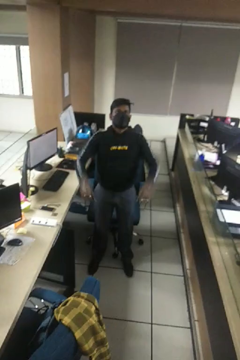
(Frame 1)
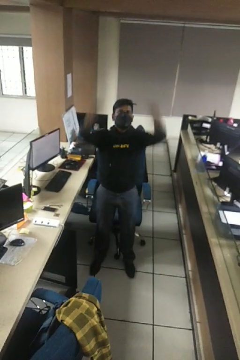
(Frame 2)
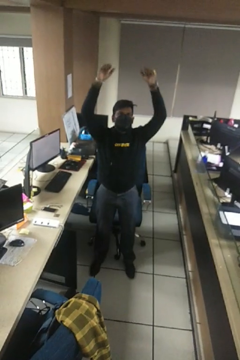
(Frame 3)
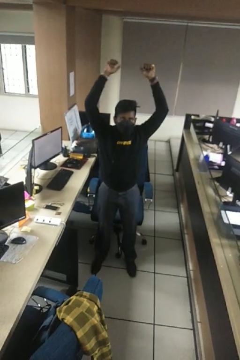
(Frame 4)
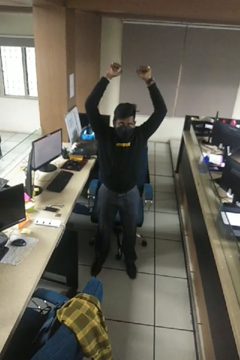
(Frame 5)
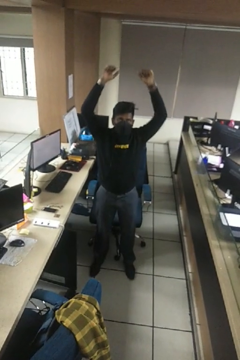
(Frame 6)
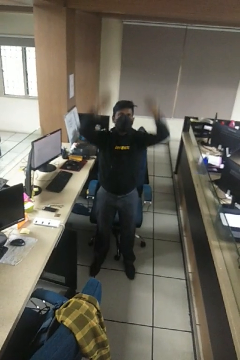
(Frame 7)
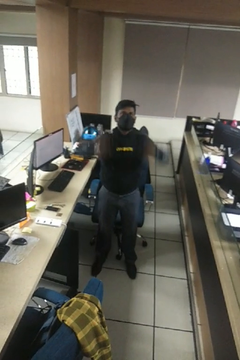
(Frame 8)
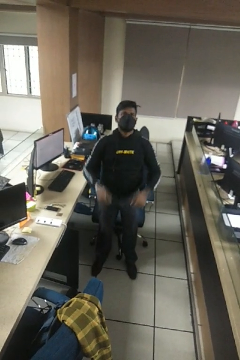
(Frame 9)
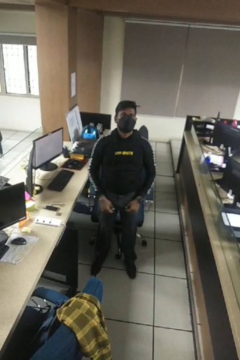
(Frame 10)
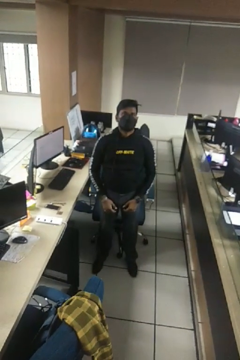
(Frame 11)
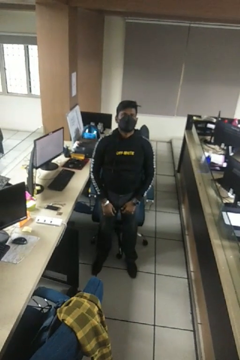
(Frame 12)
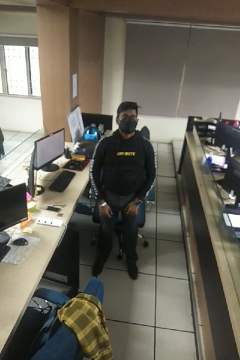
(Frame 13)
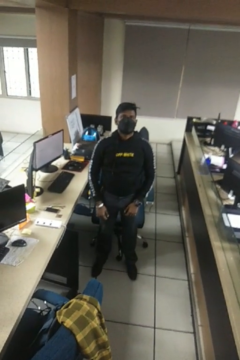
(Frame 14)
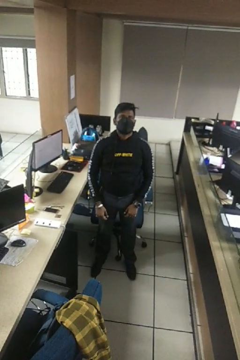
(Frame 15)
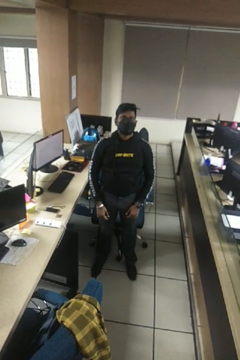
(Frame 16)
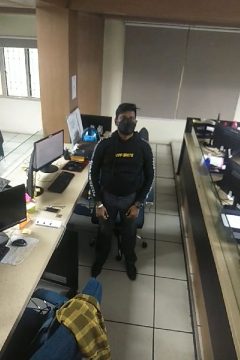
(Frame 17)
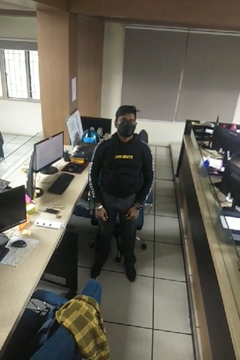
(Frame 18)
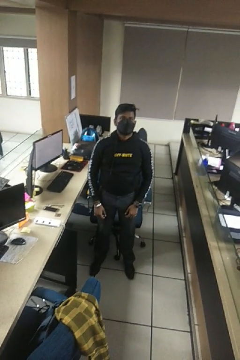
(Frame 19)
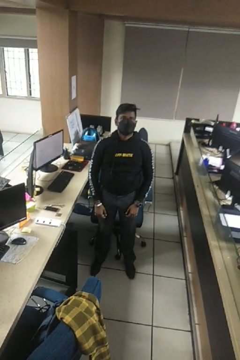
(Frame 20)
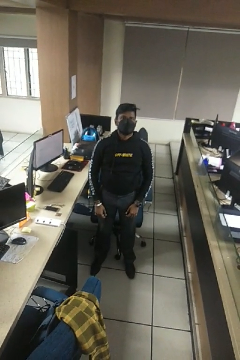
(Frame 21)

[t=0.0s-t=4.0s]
person stretches arms over head

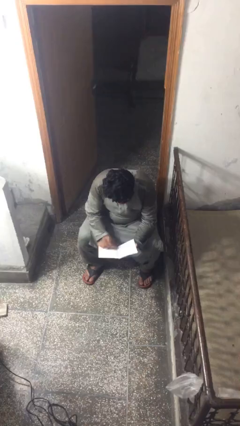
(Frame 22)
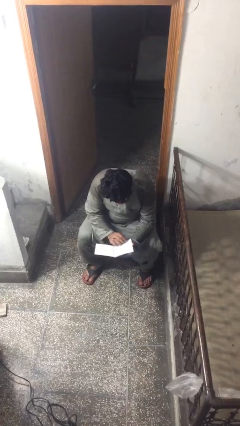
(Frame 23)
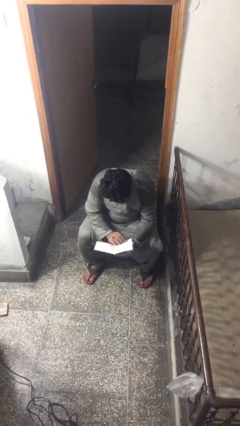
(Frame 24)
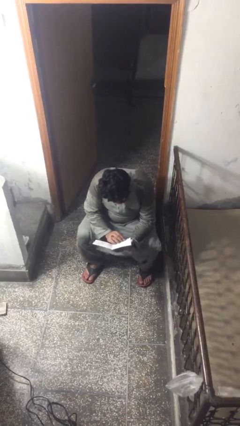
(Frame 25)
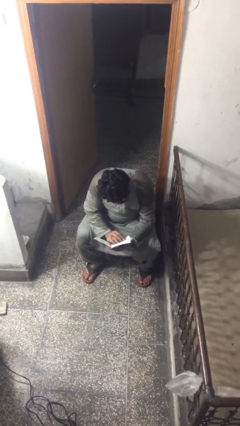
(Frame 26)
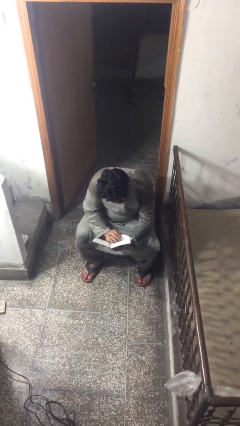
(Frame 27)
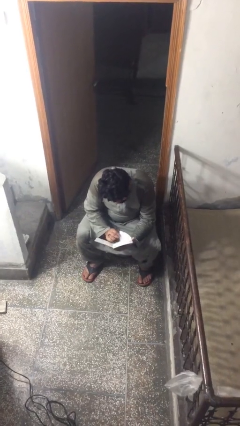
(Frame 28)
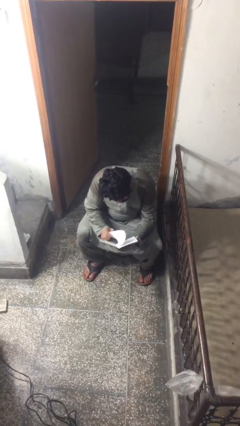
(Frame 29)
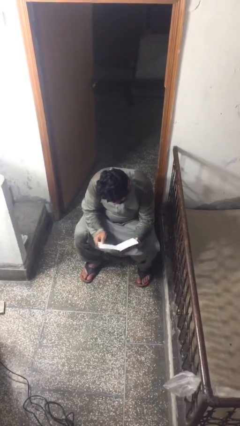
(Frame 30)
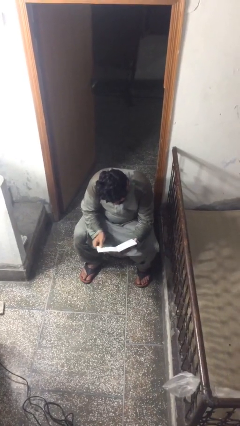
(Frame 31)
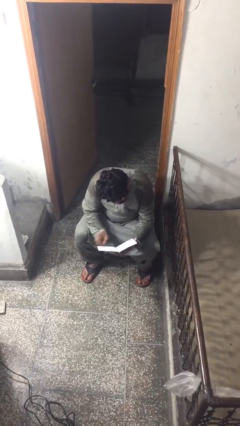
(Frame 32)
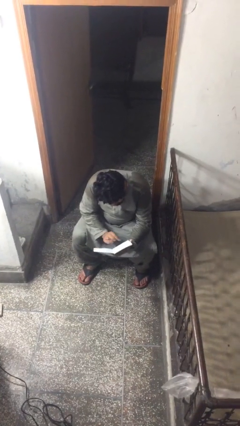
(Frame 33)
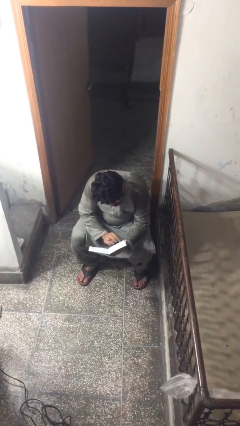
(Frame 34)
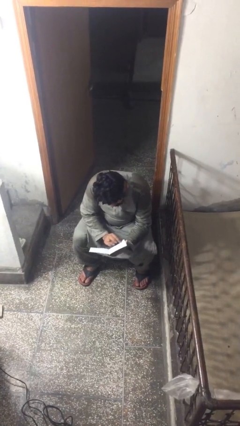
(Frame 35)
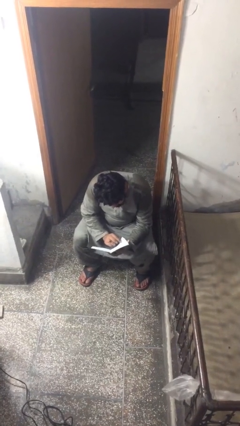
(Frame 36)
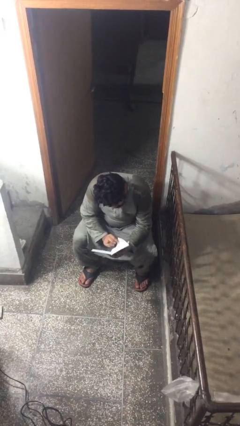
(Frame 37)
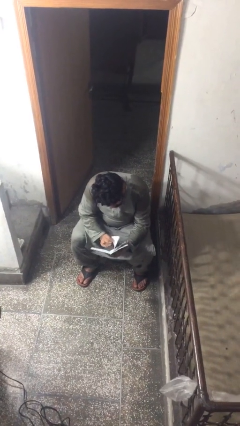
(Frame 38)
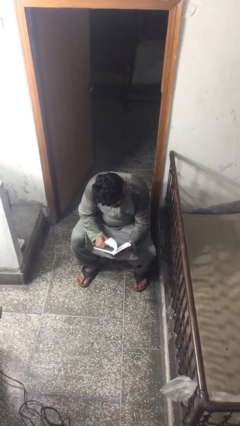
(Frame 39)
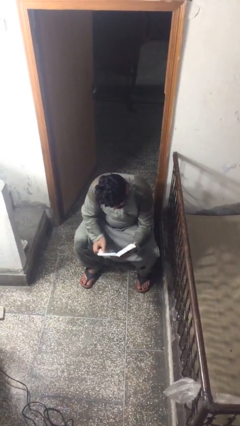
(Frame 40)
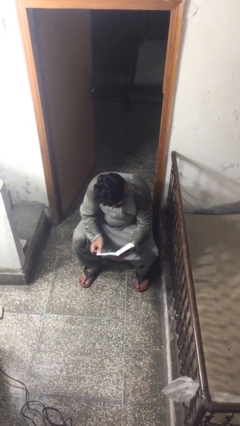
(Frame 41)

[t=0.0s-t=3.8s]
person reads document

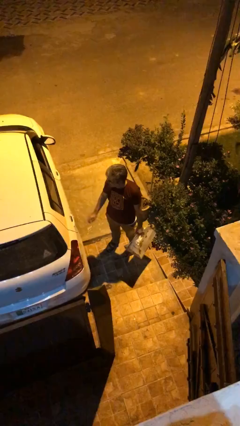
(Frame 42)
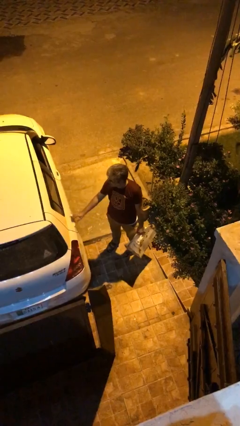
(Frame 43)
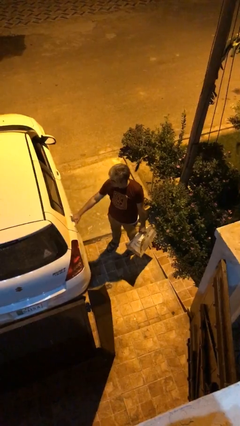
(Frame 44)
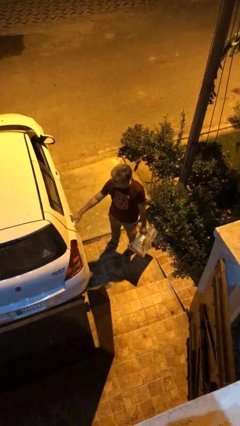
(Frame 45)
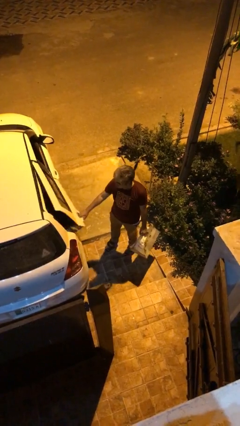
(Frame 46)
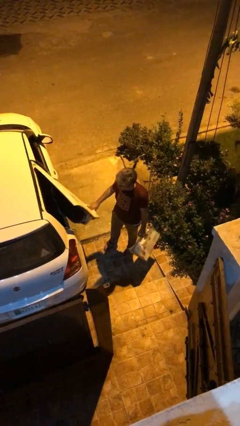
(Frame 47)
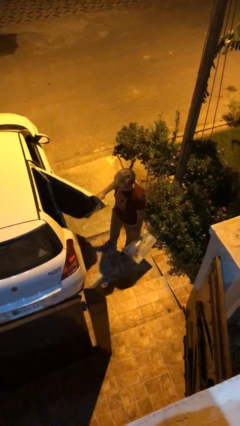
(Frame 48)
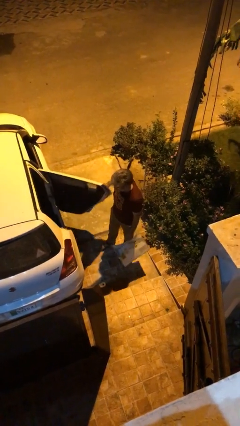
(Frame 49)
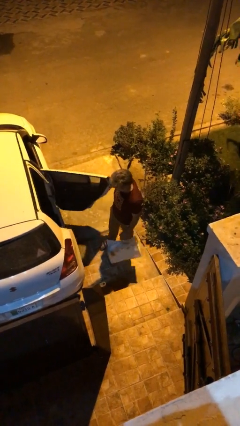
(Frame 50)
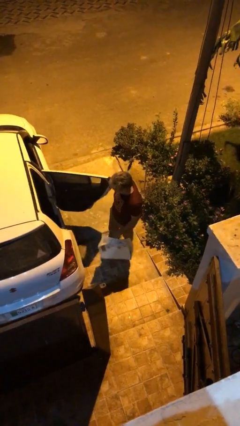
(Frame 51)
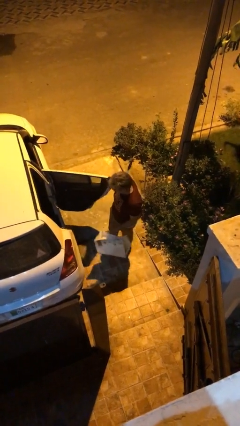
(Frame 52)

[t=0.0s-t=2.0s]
person opens car door

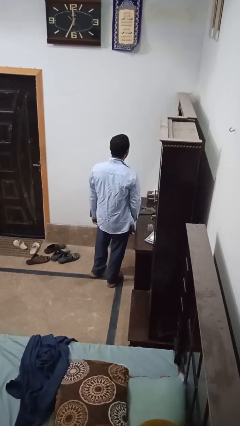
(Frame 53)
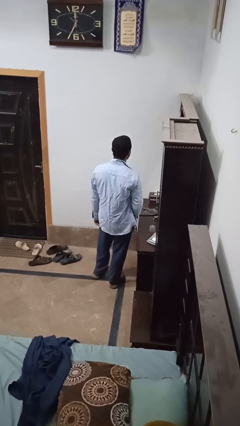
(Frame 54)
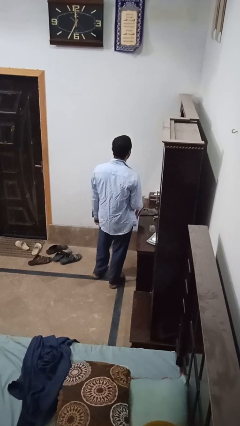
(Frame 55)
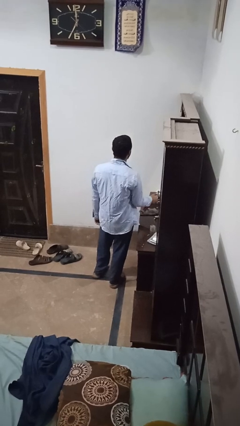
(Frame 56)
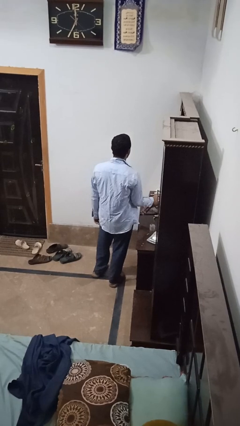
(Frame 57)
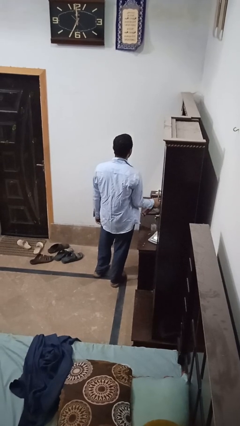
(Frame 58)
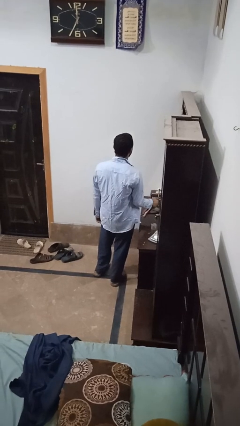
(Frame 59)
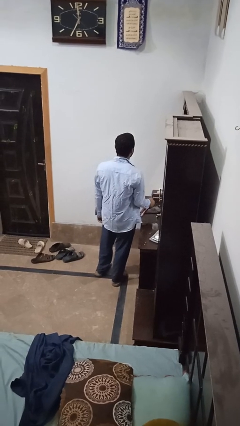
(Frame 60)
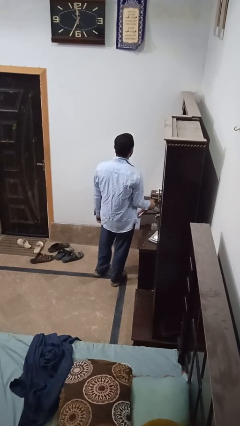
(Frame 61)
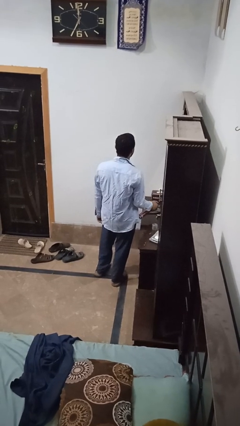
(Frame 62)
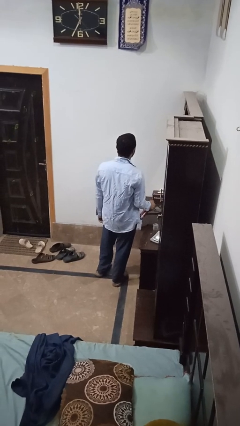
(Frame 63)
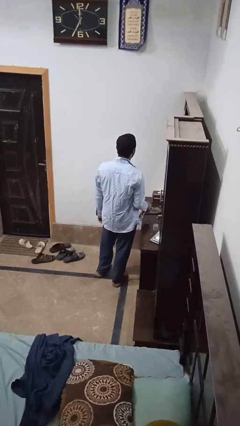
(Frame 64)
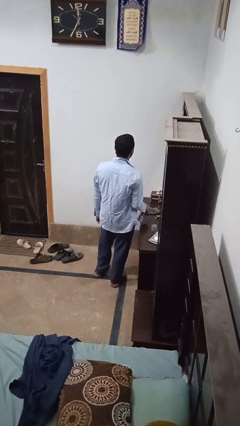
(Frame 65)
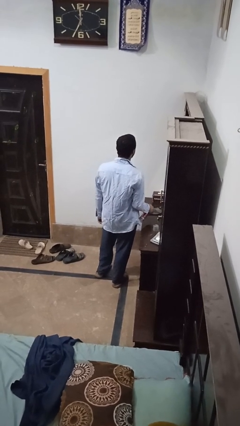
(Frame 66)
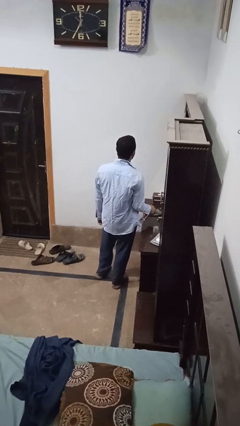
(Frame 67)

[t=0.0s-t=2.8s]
person sprays from bottle

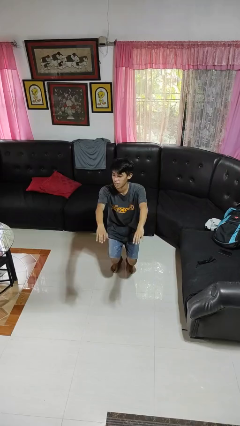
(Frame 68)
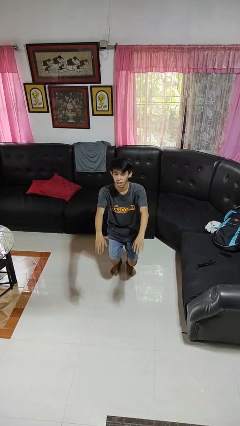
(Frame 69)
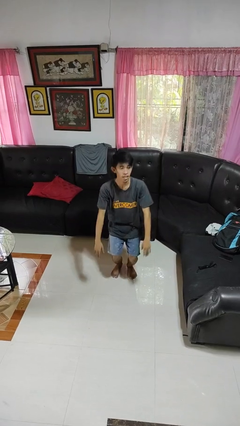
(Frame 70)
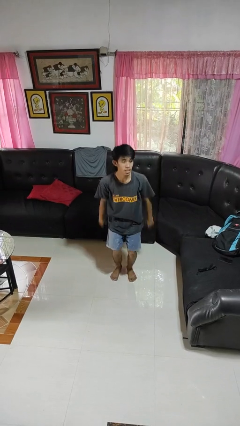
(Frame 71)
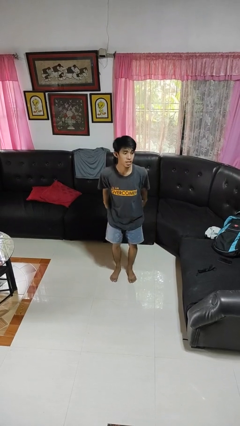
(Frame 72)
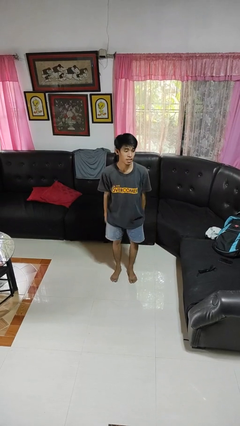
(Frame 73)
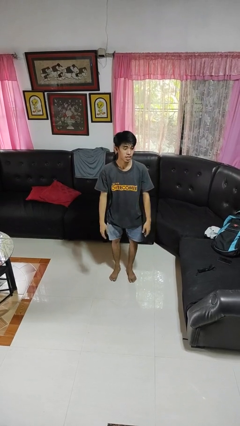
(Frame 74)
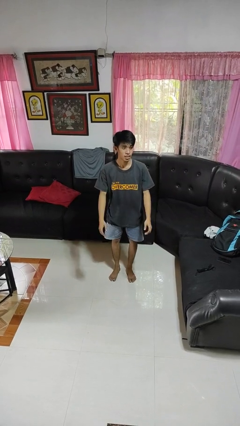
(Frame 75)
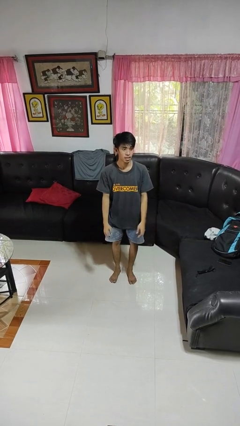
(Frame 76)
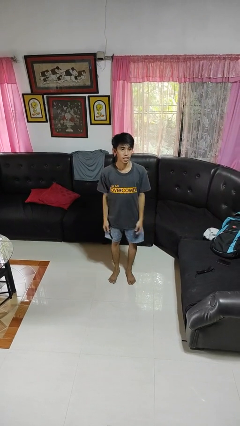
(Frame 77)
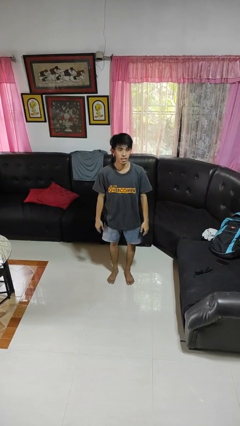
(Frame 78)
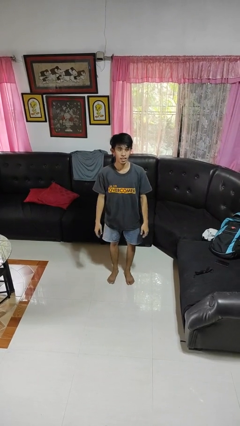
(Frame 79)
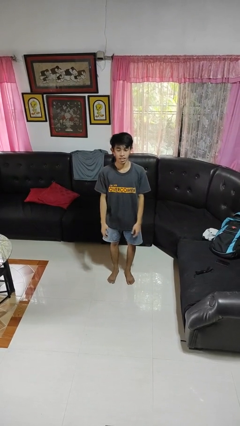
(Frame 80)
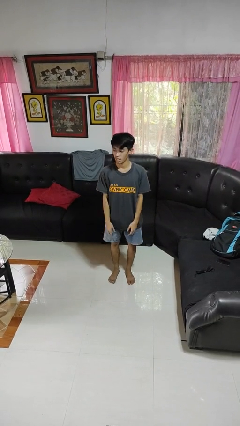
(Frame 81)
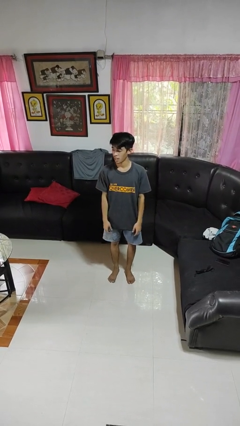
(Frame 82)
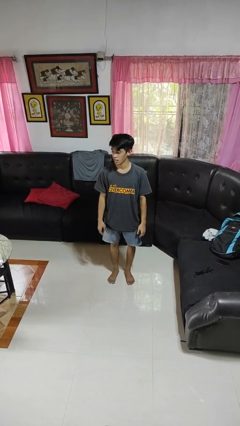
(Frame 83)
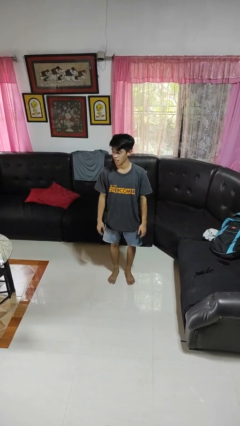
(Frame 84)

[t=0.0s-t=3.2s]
person stands up

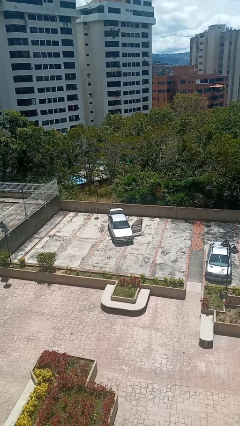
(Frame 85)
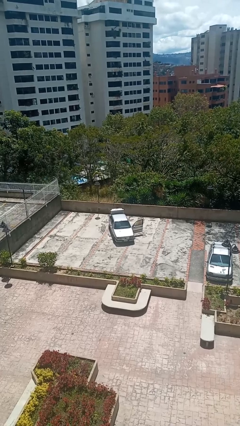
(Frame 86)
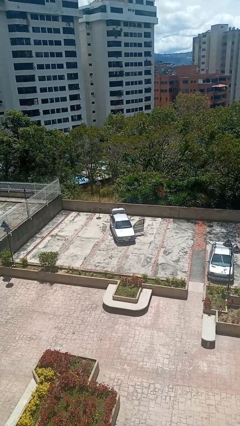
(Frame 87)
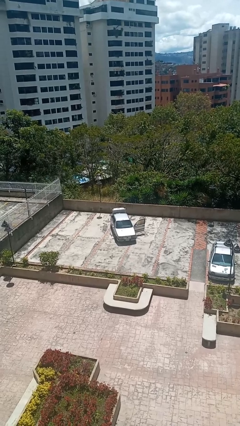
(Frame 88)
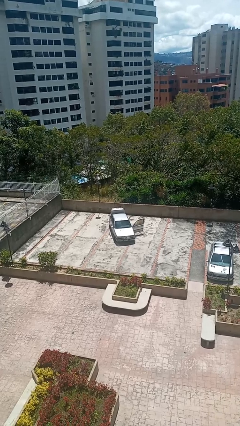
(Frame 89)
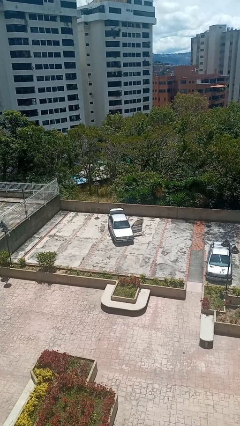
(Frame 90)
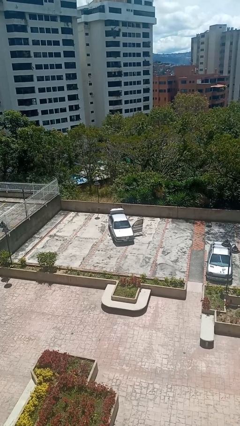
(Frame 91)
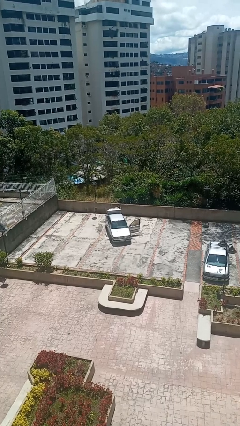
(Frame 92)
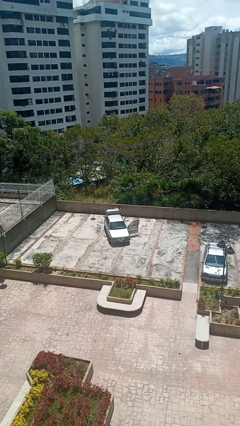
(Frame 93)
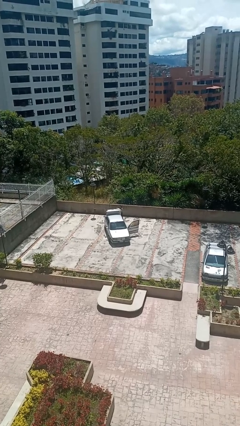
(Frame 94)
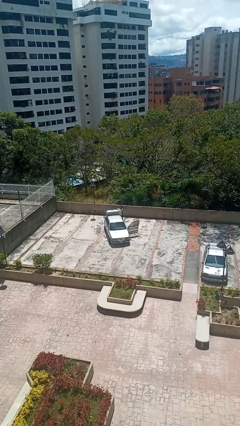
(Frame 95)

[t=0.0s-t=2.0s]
person unloads car
